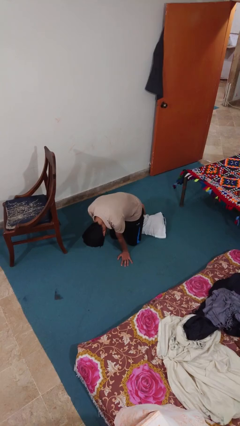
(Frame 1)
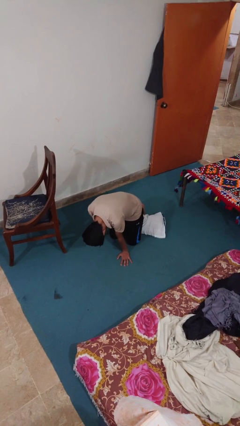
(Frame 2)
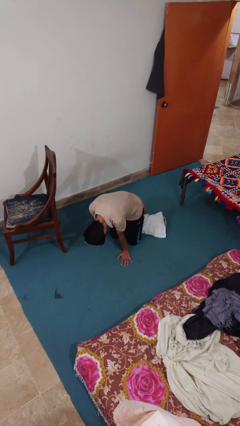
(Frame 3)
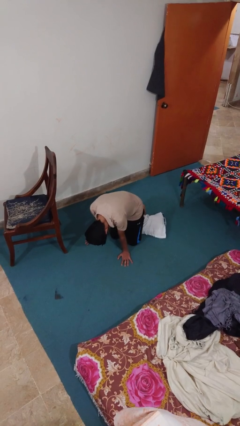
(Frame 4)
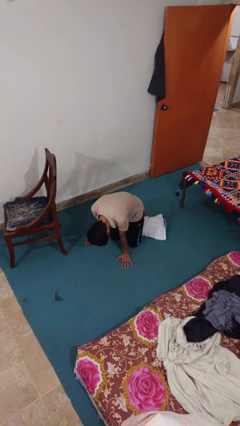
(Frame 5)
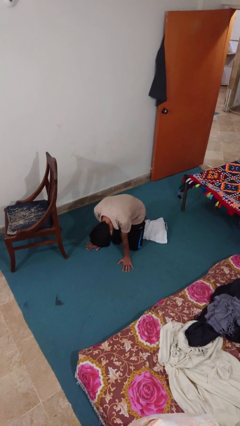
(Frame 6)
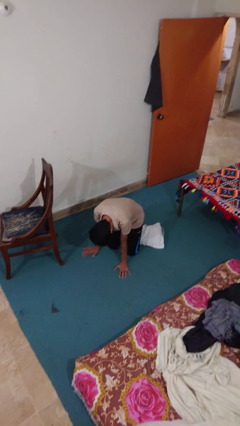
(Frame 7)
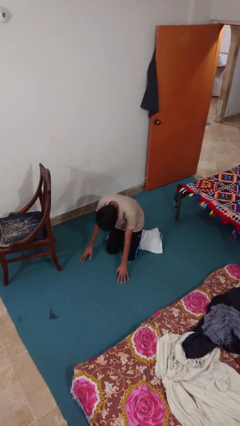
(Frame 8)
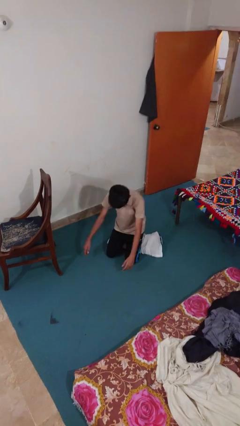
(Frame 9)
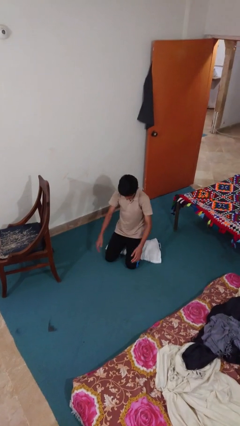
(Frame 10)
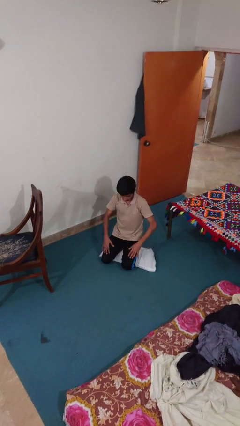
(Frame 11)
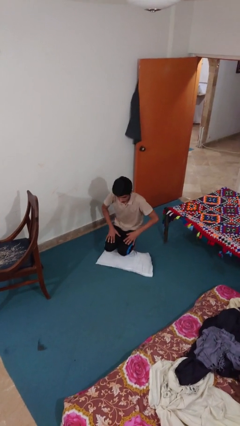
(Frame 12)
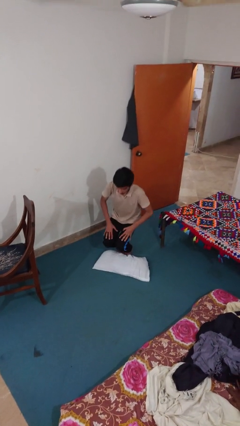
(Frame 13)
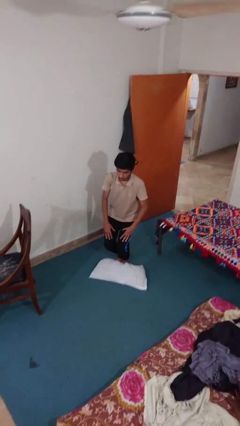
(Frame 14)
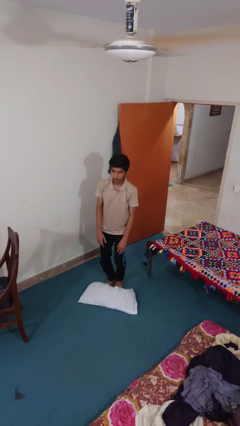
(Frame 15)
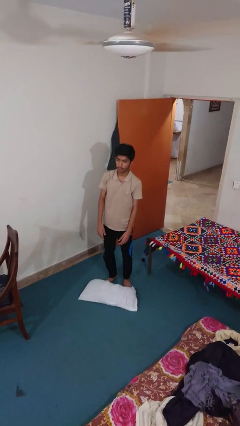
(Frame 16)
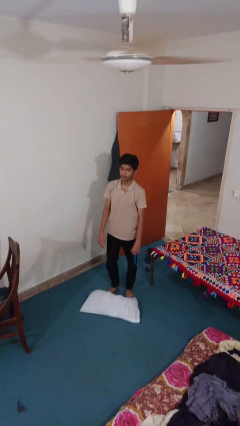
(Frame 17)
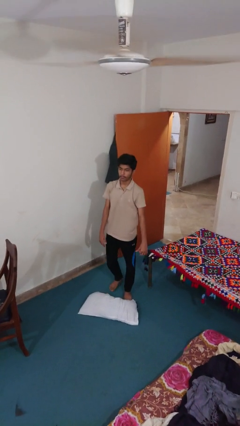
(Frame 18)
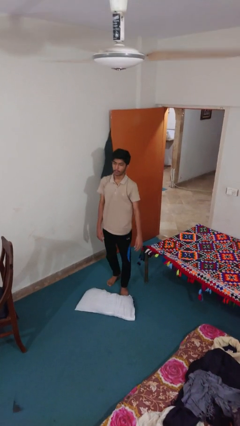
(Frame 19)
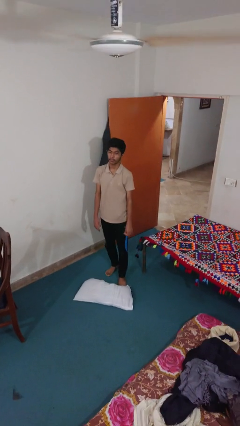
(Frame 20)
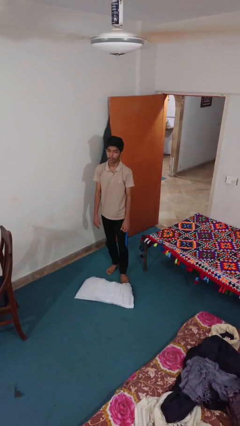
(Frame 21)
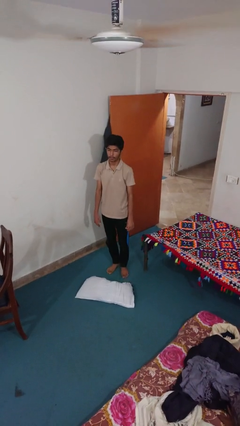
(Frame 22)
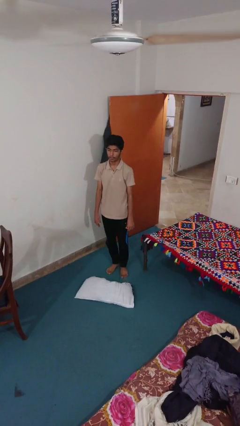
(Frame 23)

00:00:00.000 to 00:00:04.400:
person stands up from floor

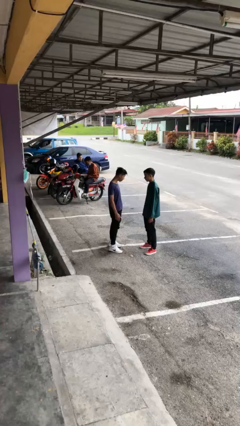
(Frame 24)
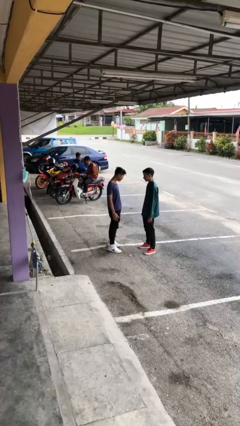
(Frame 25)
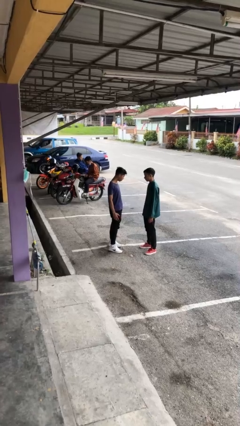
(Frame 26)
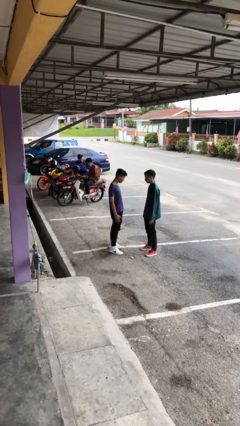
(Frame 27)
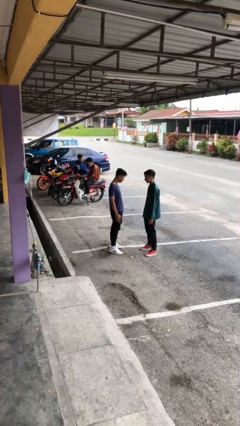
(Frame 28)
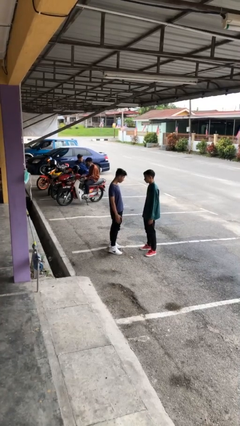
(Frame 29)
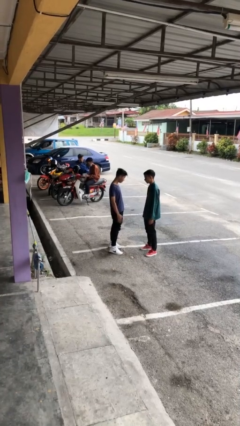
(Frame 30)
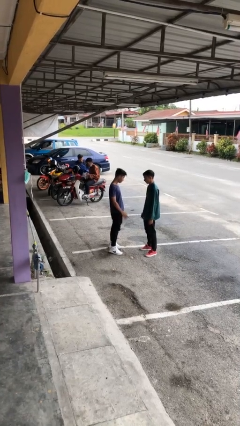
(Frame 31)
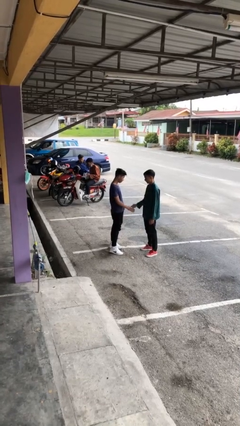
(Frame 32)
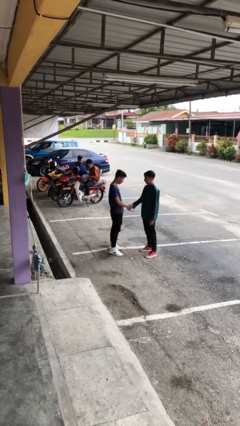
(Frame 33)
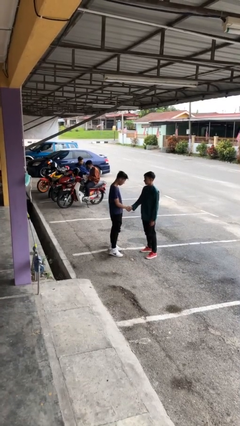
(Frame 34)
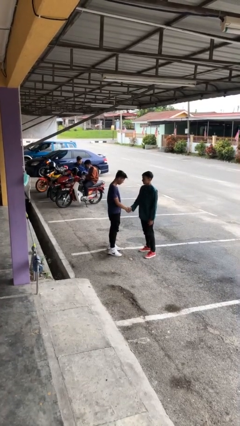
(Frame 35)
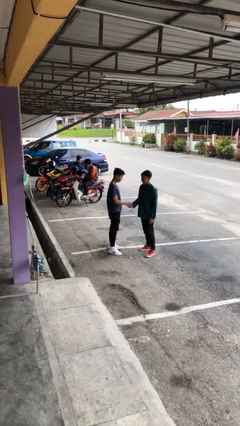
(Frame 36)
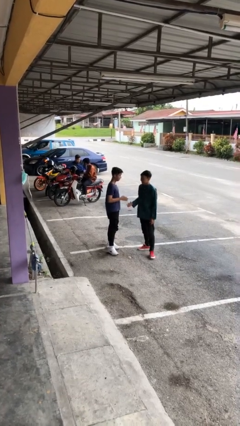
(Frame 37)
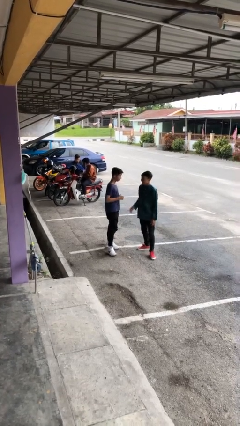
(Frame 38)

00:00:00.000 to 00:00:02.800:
person shakes hand

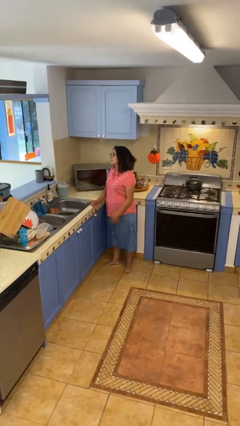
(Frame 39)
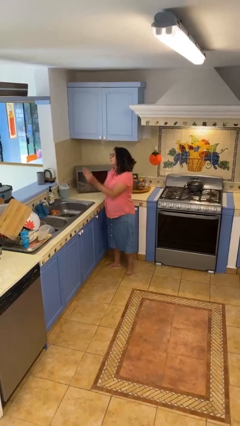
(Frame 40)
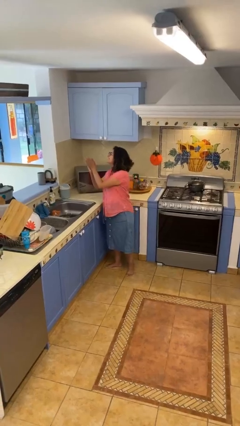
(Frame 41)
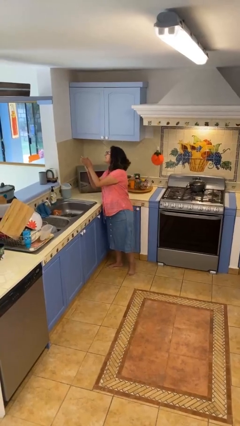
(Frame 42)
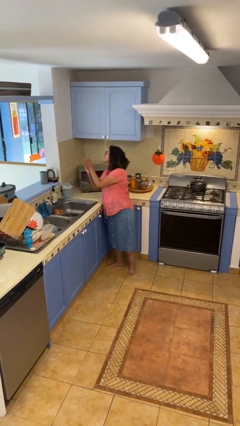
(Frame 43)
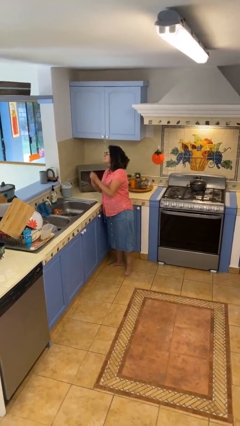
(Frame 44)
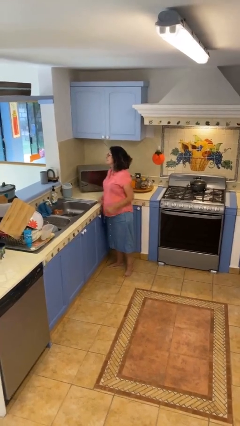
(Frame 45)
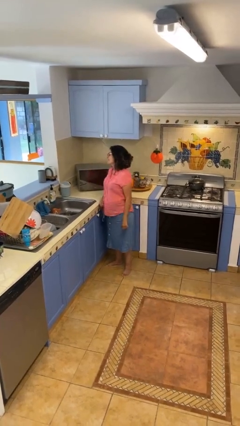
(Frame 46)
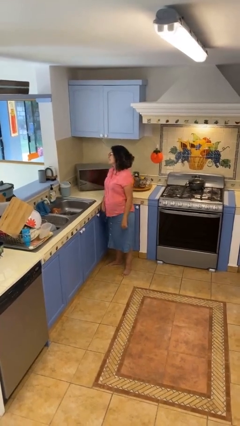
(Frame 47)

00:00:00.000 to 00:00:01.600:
person claps hands

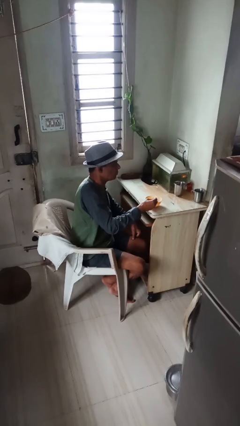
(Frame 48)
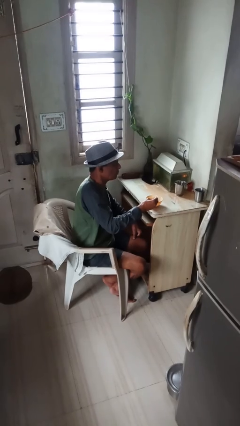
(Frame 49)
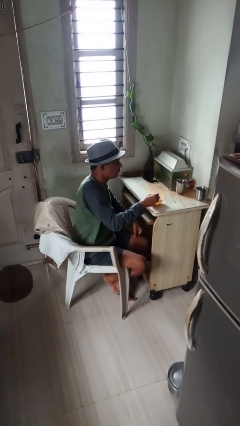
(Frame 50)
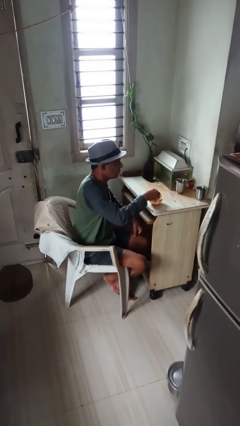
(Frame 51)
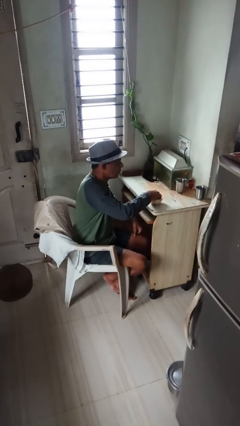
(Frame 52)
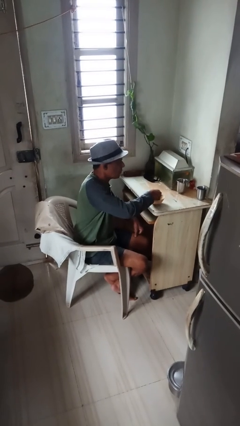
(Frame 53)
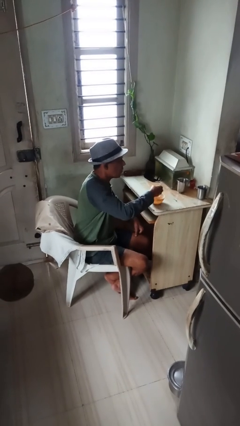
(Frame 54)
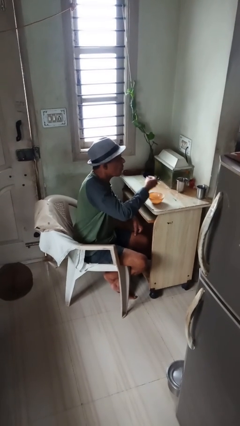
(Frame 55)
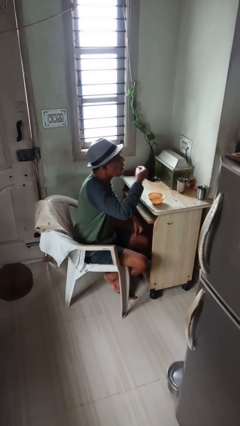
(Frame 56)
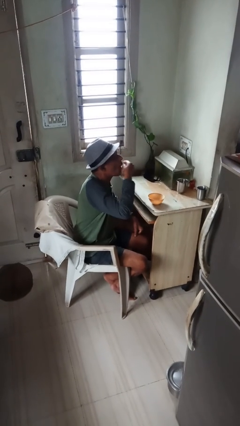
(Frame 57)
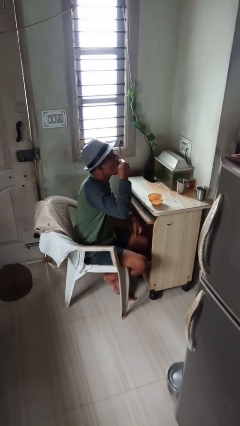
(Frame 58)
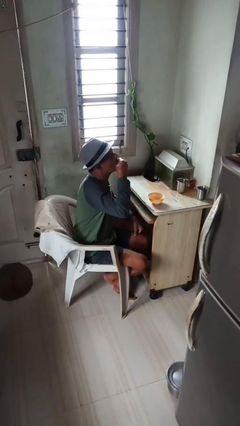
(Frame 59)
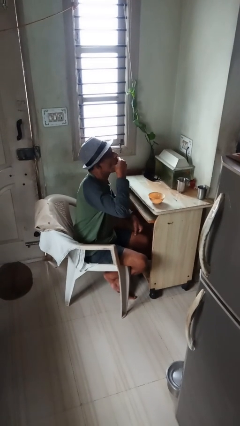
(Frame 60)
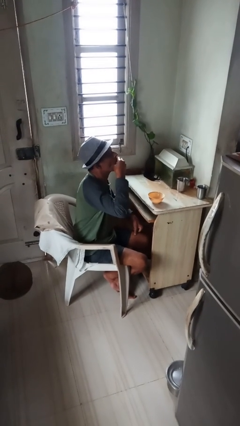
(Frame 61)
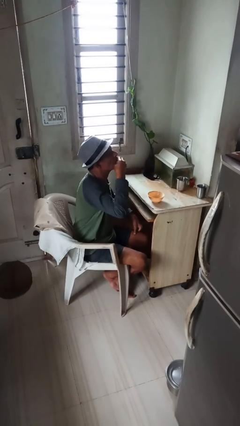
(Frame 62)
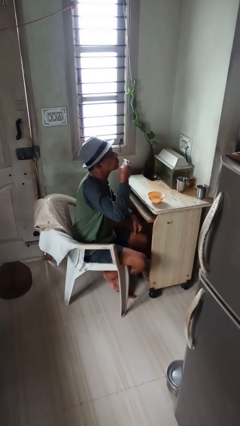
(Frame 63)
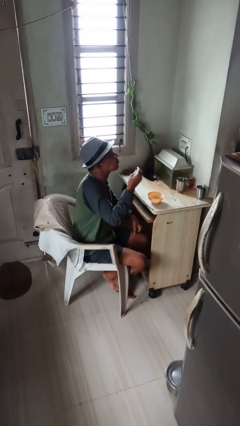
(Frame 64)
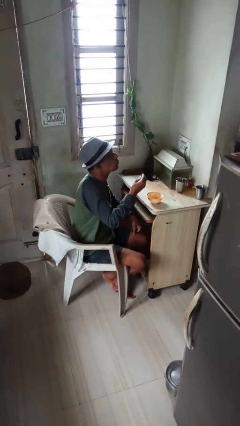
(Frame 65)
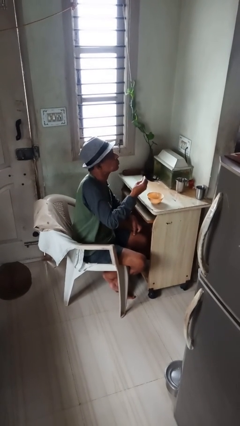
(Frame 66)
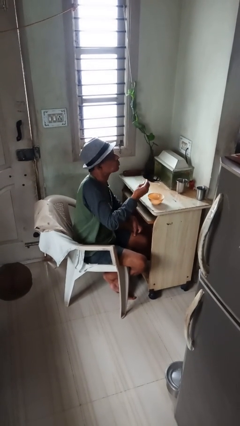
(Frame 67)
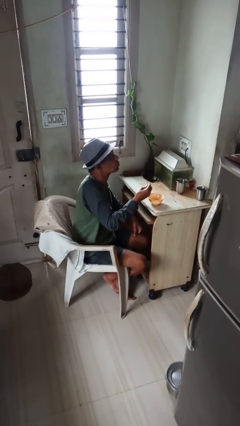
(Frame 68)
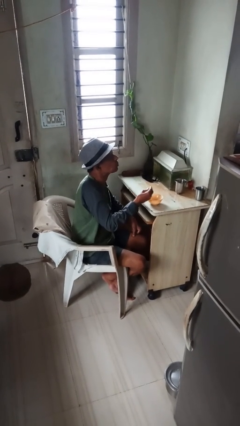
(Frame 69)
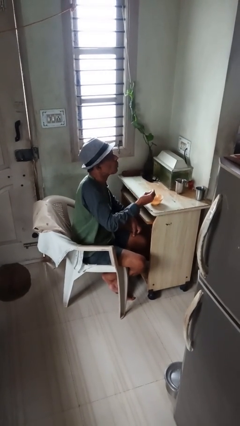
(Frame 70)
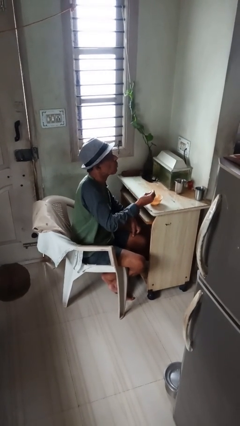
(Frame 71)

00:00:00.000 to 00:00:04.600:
person eats with hands

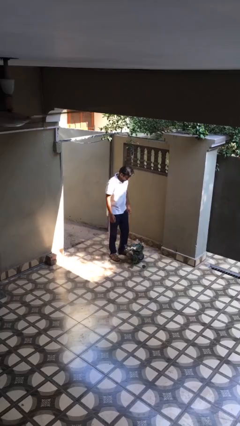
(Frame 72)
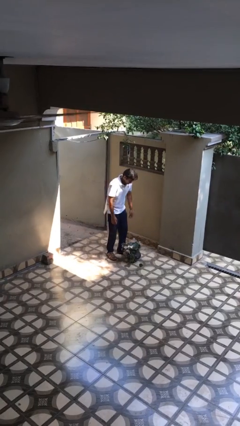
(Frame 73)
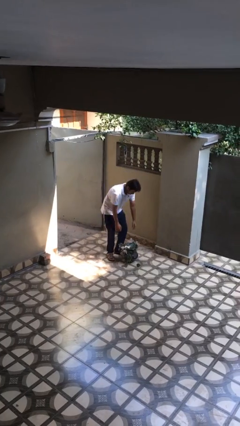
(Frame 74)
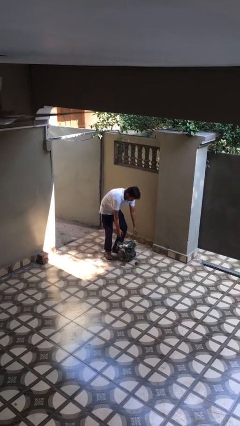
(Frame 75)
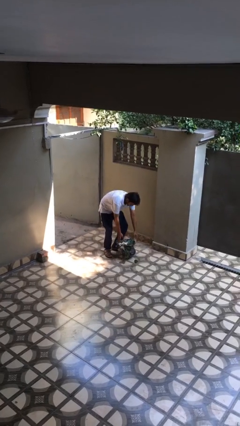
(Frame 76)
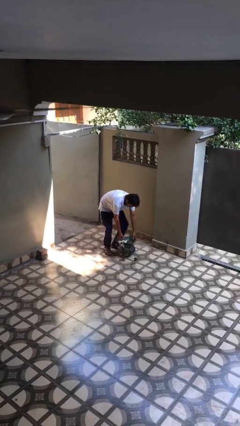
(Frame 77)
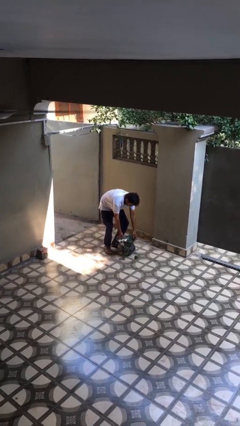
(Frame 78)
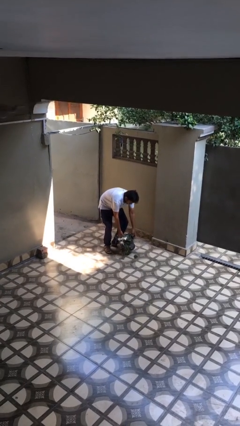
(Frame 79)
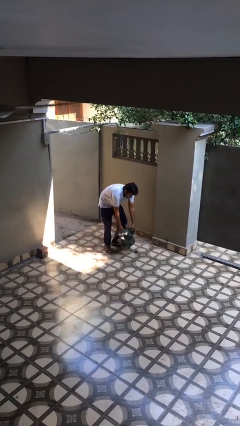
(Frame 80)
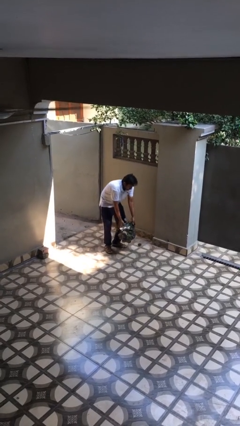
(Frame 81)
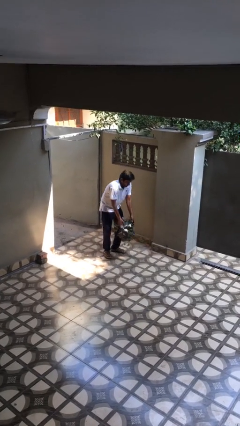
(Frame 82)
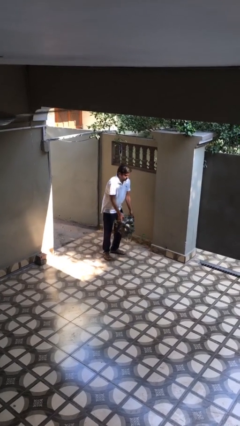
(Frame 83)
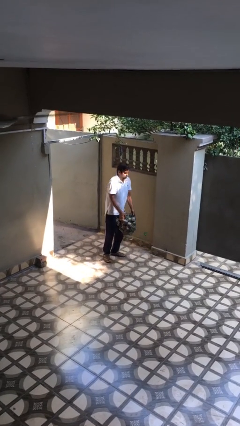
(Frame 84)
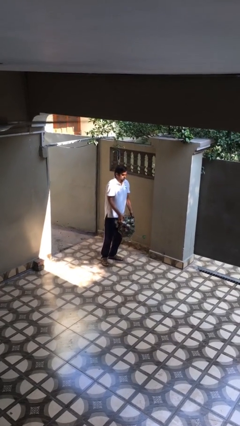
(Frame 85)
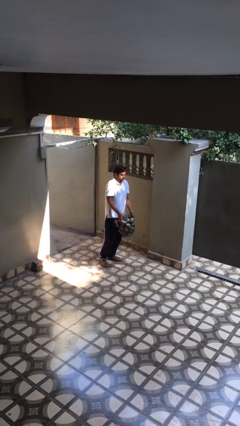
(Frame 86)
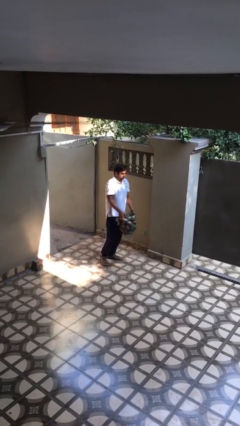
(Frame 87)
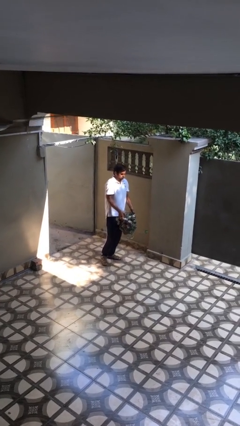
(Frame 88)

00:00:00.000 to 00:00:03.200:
person picks up object from floor

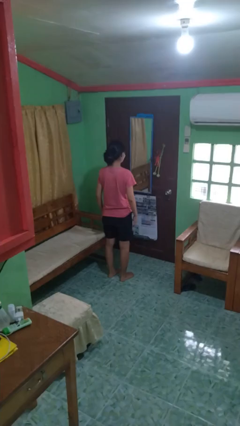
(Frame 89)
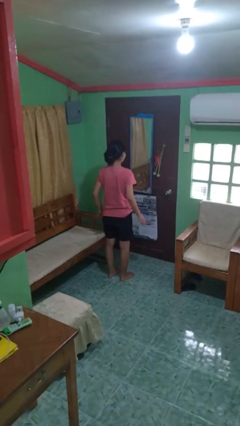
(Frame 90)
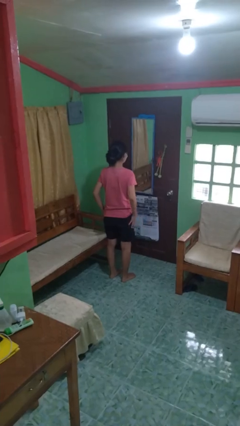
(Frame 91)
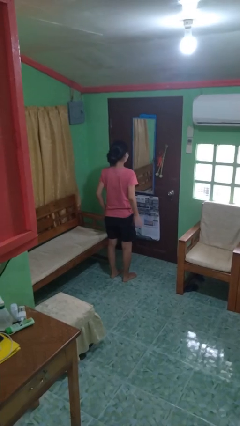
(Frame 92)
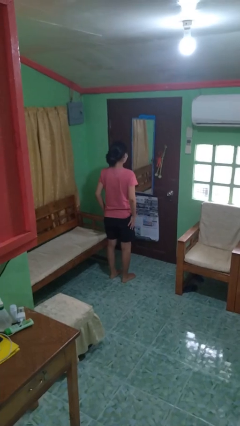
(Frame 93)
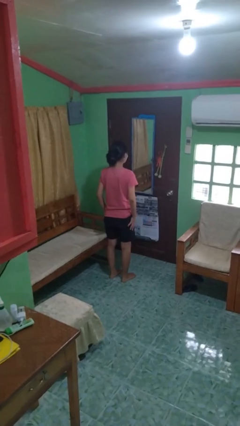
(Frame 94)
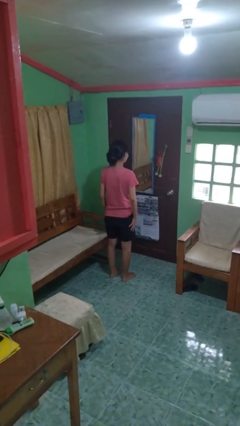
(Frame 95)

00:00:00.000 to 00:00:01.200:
person slaps hands on thighs
